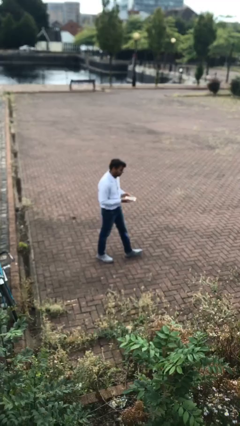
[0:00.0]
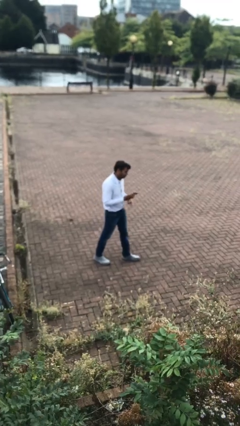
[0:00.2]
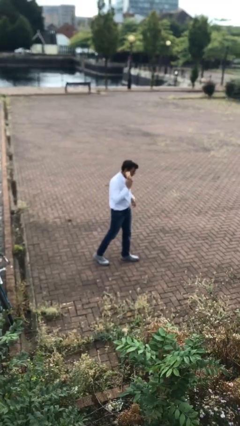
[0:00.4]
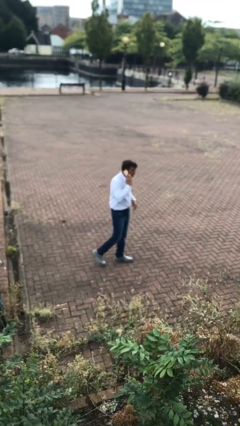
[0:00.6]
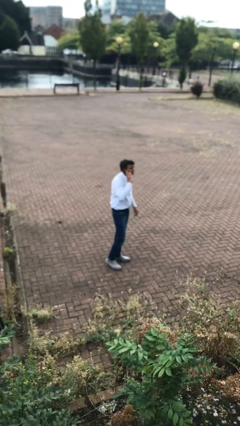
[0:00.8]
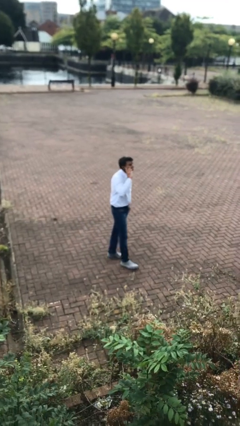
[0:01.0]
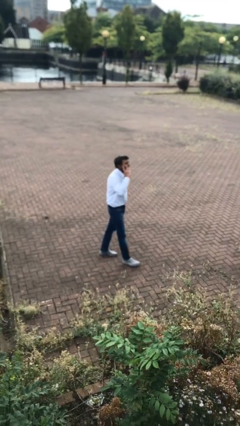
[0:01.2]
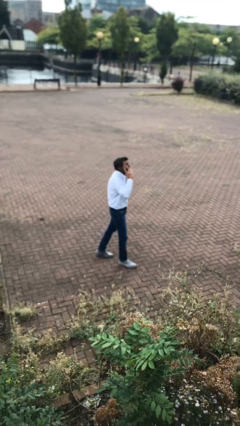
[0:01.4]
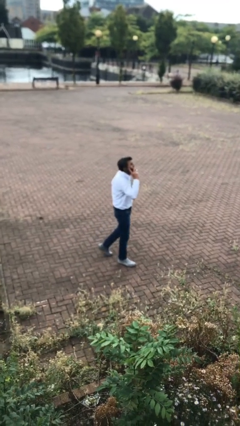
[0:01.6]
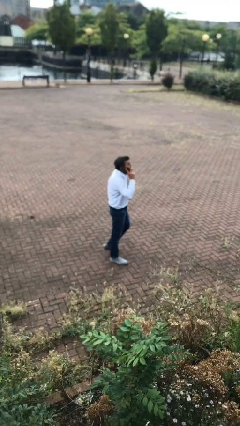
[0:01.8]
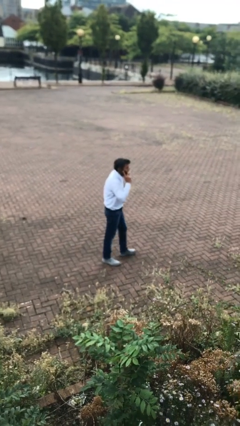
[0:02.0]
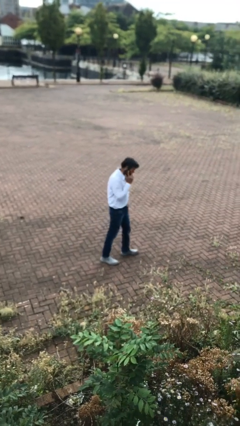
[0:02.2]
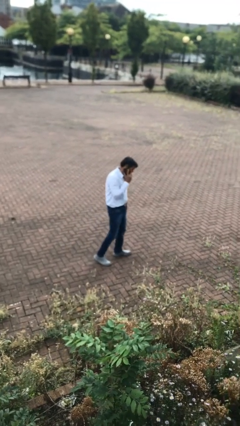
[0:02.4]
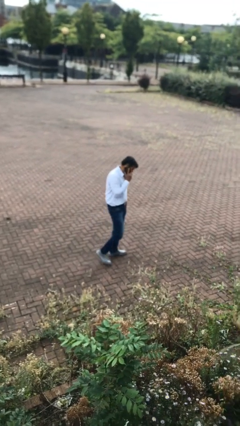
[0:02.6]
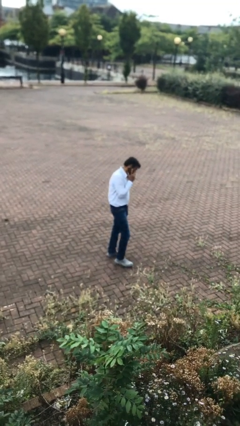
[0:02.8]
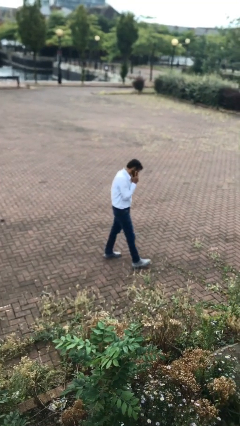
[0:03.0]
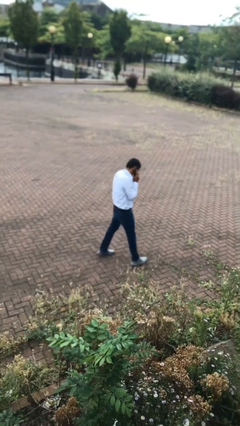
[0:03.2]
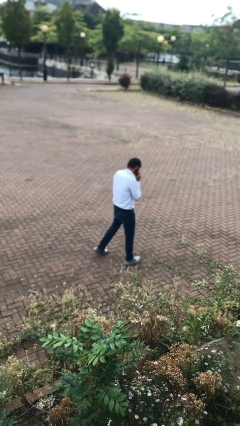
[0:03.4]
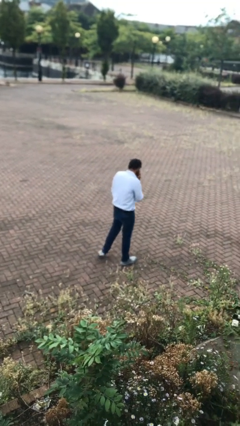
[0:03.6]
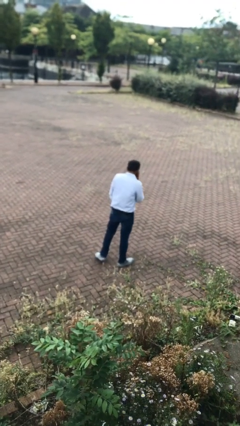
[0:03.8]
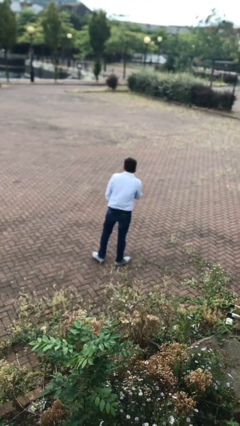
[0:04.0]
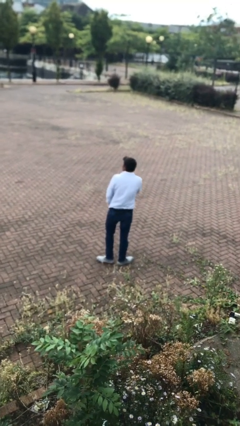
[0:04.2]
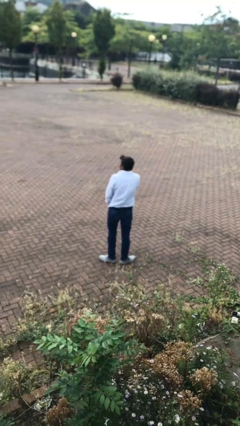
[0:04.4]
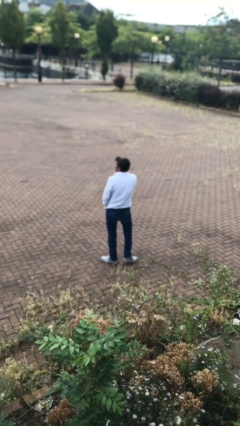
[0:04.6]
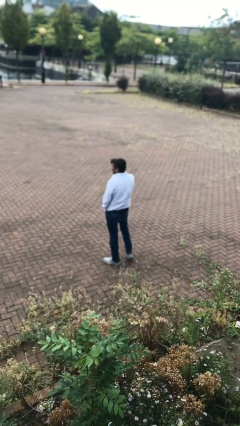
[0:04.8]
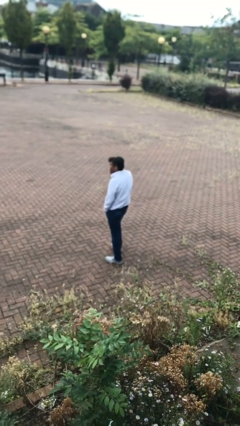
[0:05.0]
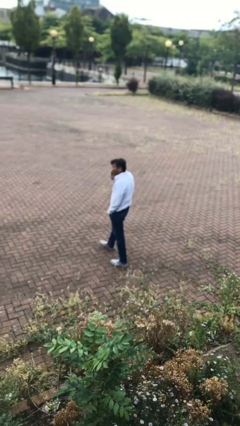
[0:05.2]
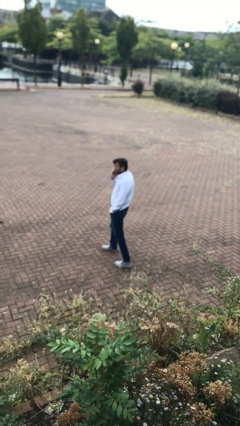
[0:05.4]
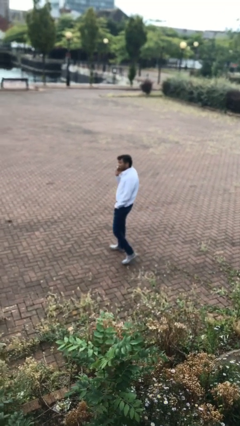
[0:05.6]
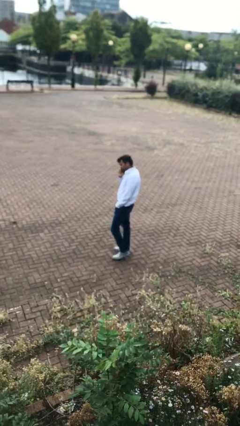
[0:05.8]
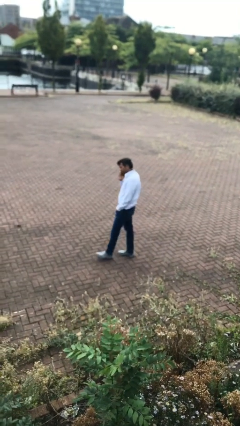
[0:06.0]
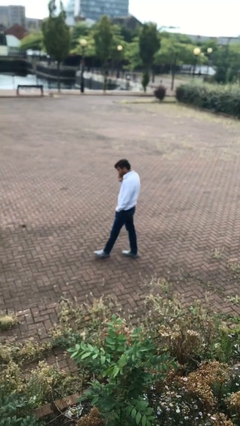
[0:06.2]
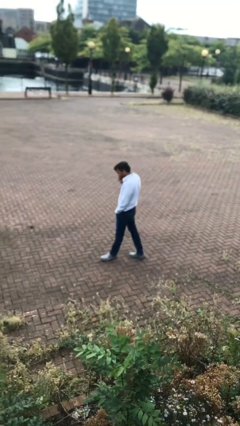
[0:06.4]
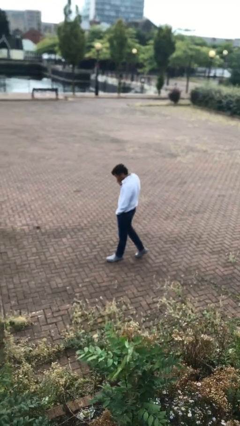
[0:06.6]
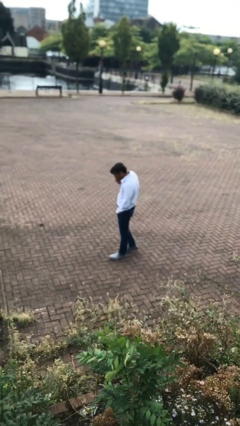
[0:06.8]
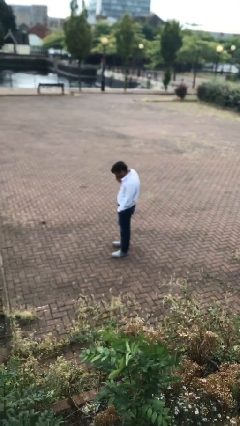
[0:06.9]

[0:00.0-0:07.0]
person talks on phone

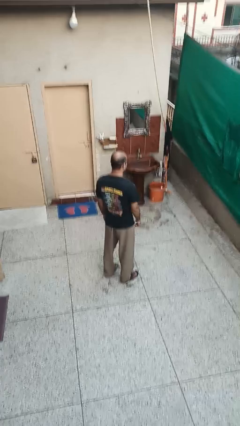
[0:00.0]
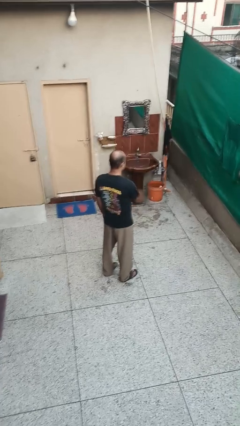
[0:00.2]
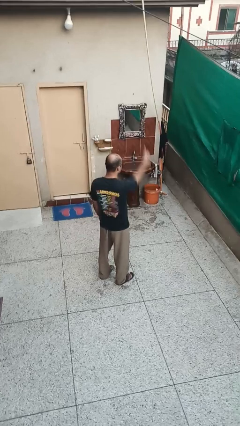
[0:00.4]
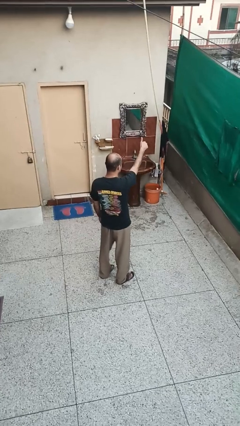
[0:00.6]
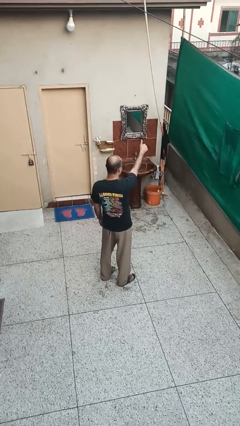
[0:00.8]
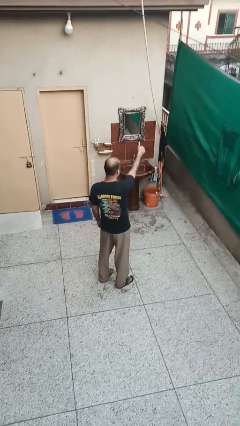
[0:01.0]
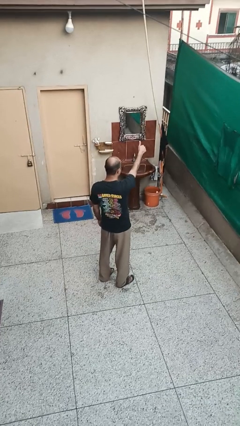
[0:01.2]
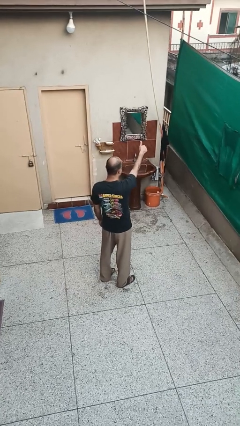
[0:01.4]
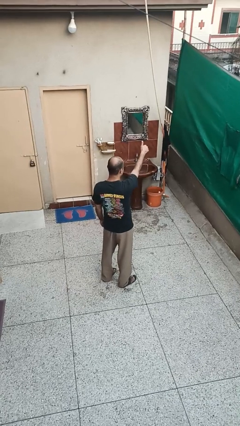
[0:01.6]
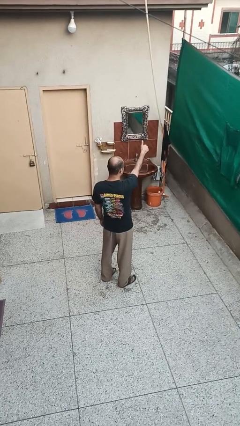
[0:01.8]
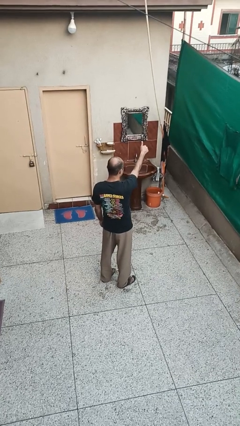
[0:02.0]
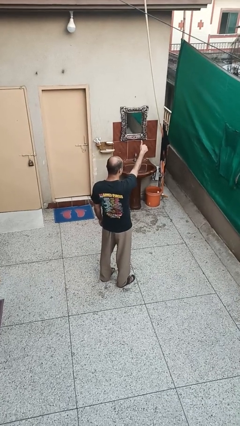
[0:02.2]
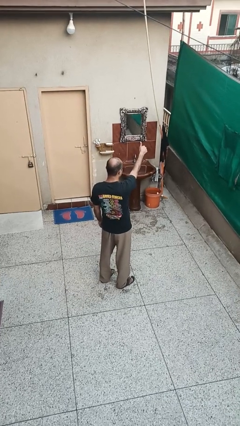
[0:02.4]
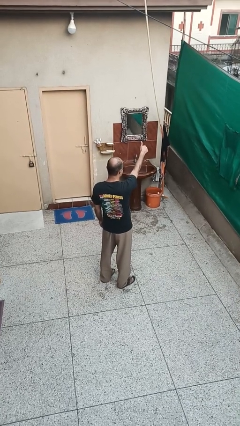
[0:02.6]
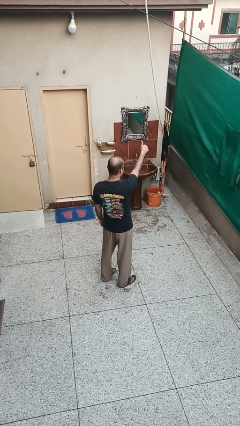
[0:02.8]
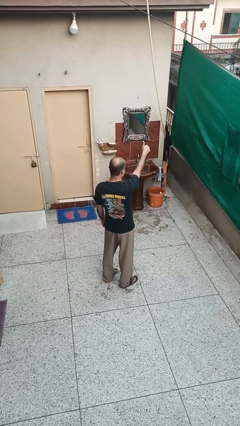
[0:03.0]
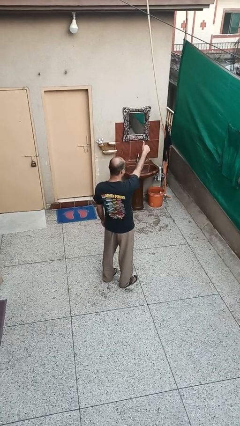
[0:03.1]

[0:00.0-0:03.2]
person gestures thumbs up

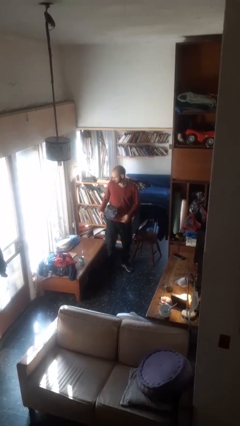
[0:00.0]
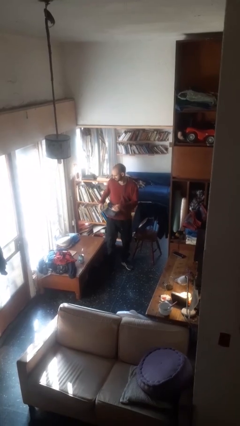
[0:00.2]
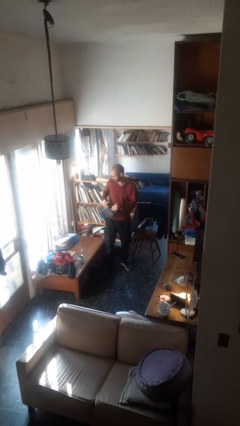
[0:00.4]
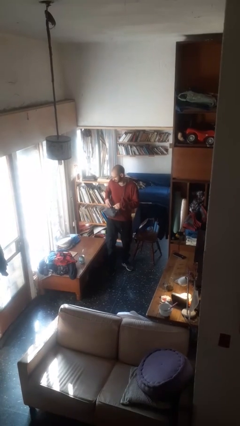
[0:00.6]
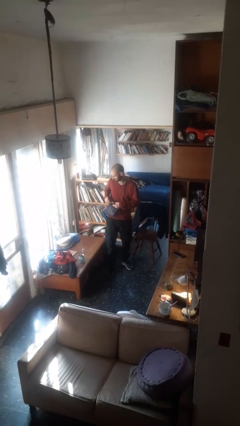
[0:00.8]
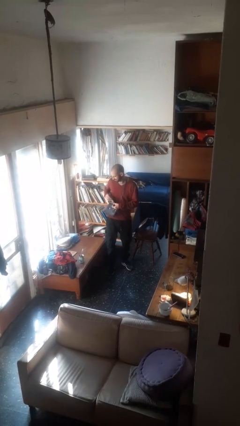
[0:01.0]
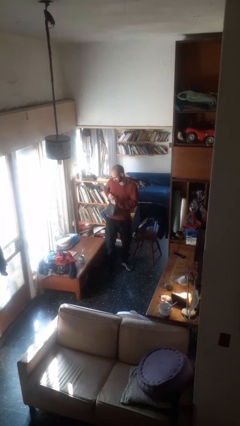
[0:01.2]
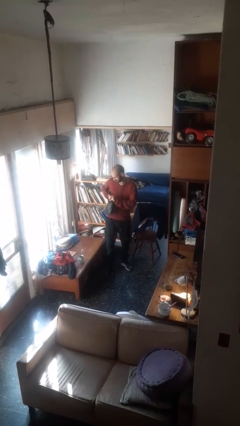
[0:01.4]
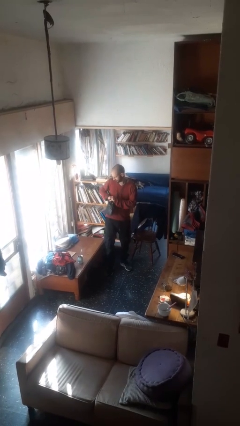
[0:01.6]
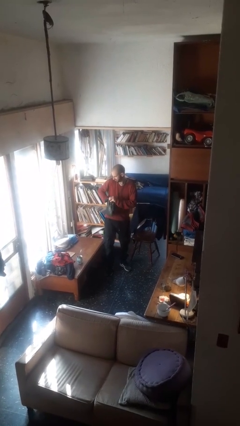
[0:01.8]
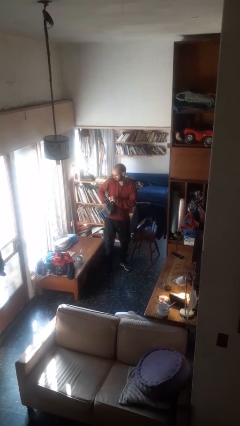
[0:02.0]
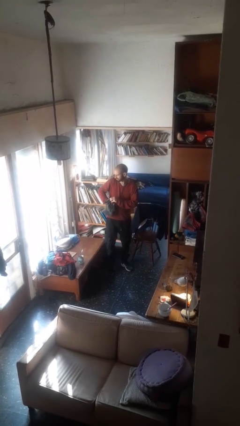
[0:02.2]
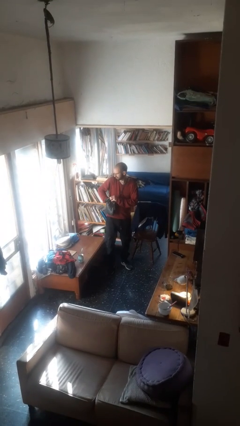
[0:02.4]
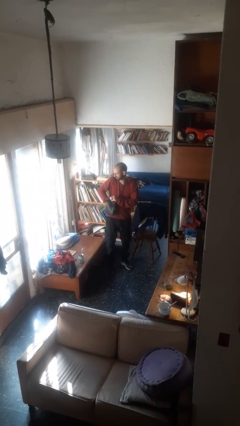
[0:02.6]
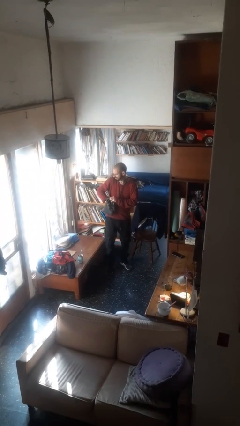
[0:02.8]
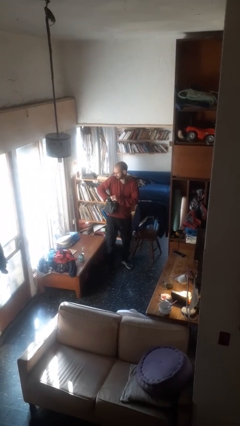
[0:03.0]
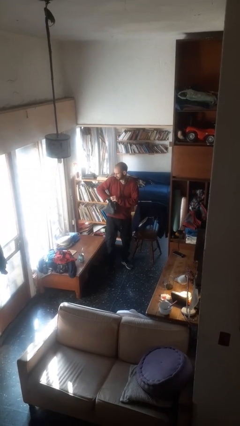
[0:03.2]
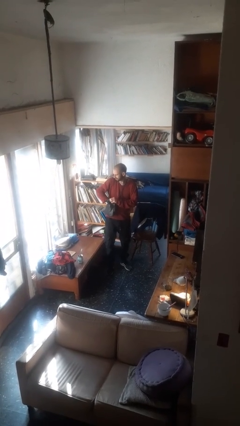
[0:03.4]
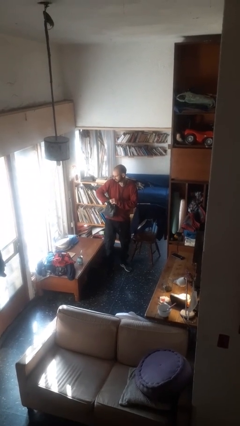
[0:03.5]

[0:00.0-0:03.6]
person searches in purse

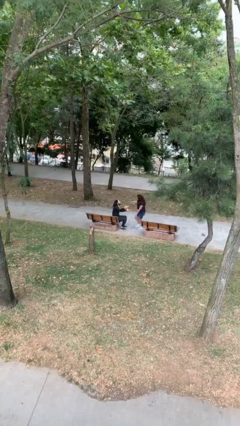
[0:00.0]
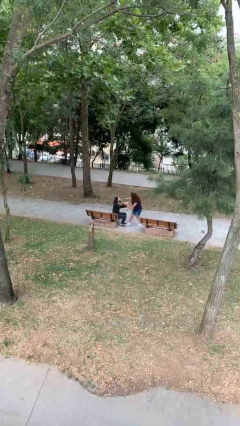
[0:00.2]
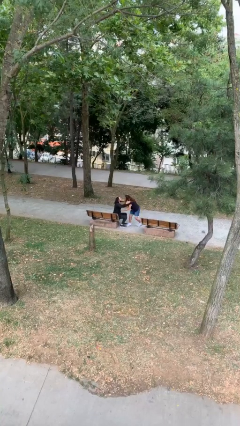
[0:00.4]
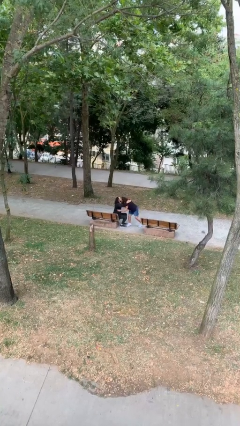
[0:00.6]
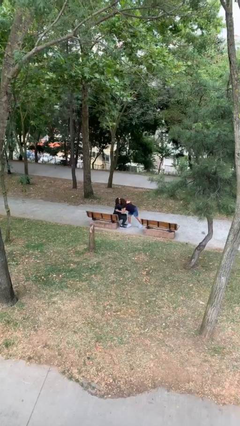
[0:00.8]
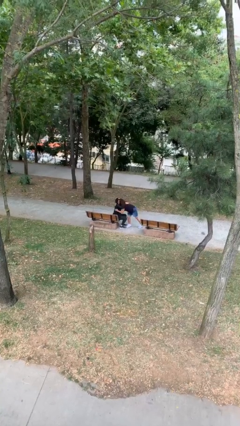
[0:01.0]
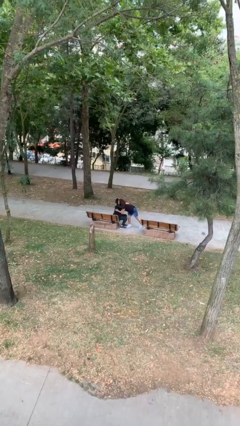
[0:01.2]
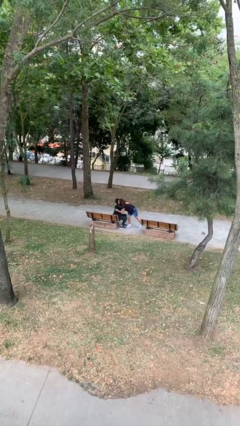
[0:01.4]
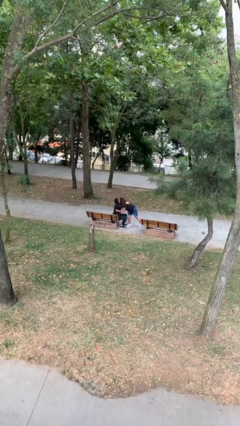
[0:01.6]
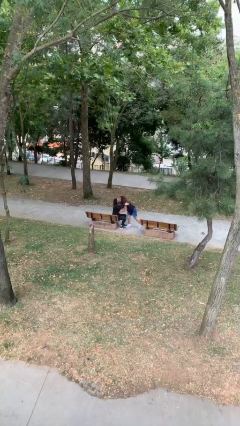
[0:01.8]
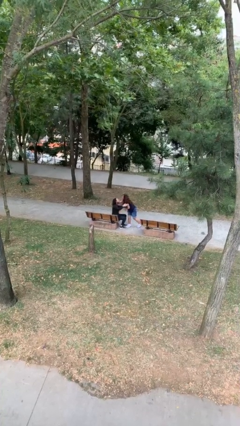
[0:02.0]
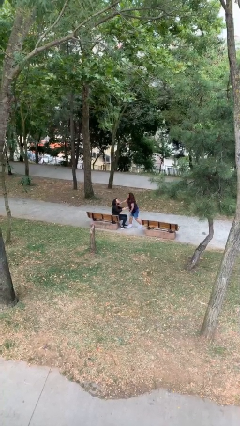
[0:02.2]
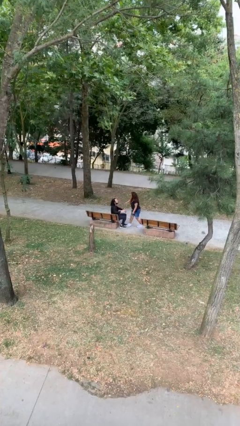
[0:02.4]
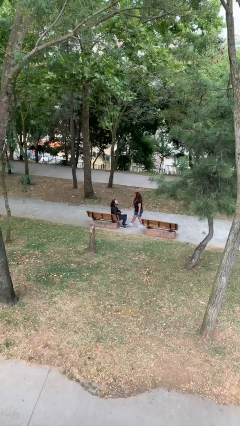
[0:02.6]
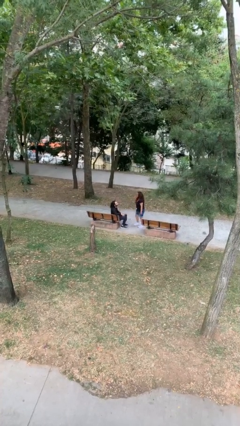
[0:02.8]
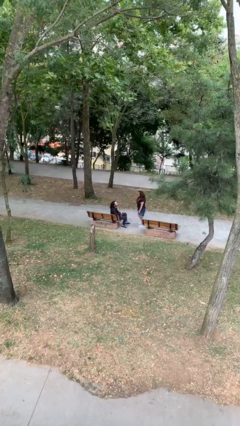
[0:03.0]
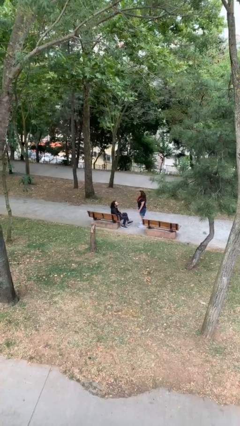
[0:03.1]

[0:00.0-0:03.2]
person embraces person

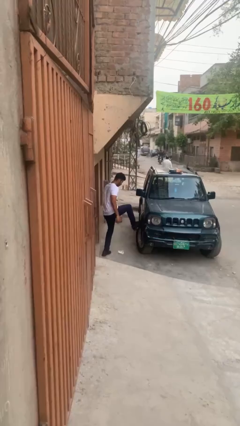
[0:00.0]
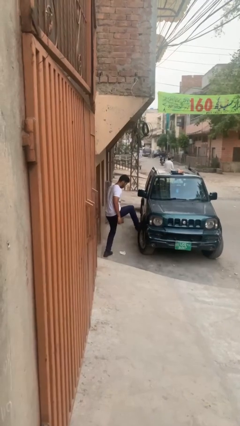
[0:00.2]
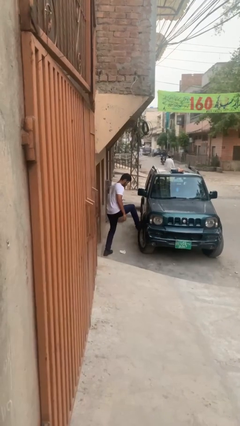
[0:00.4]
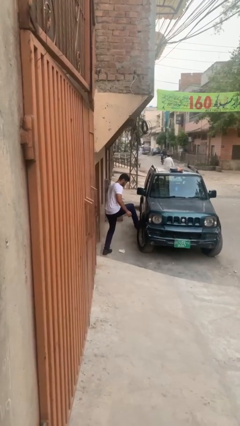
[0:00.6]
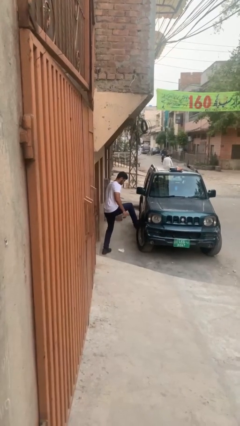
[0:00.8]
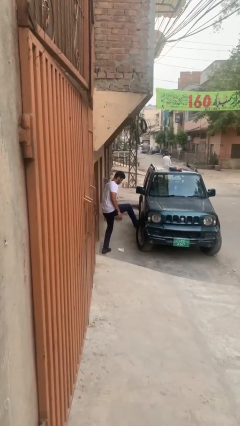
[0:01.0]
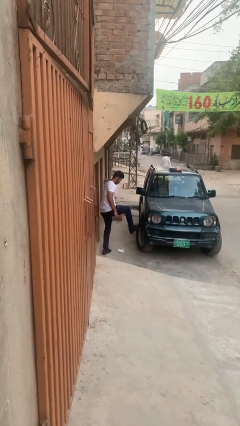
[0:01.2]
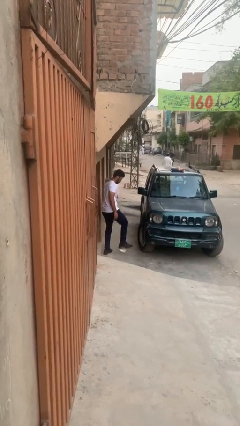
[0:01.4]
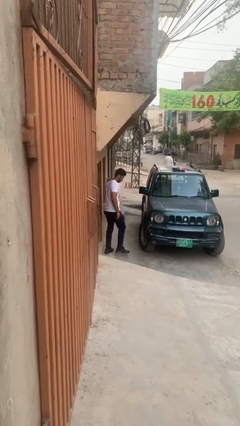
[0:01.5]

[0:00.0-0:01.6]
person kicks car tires
